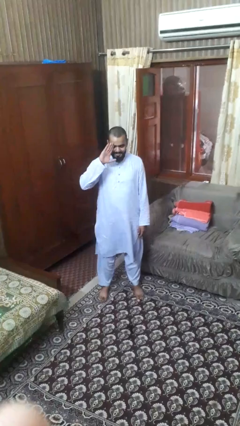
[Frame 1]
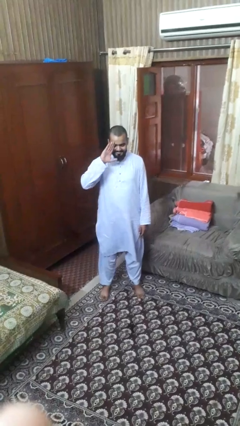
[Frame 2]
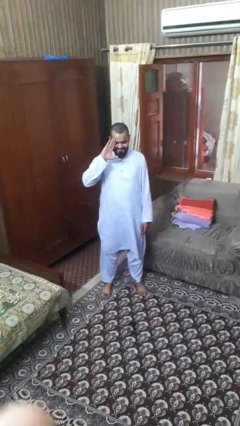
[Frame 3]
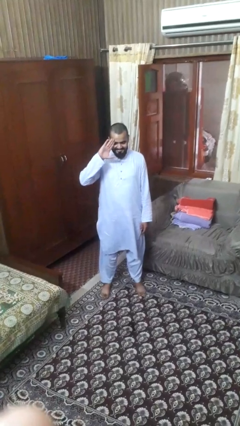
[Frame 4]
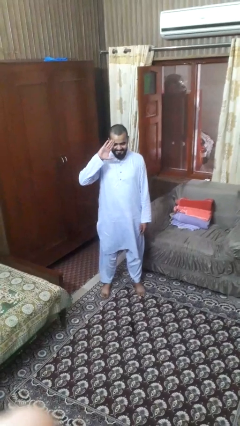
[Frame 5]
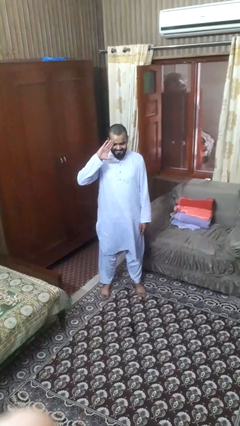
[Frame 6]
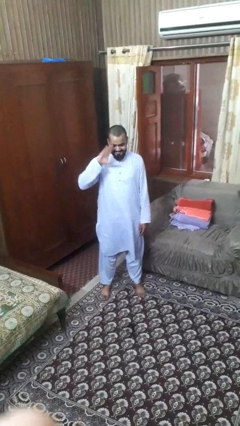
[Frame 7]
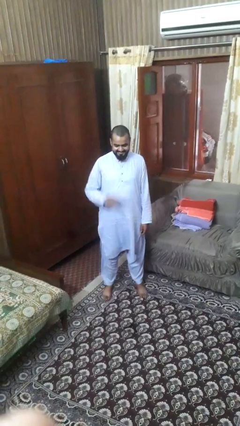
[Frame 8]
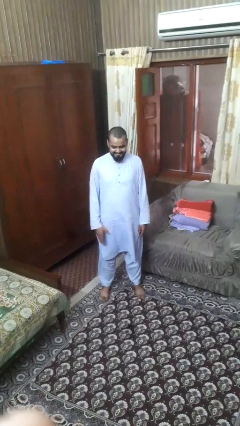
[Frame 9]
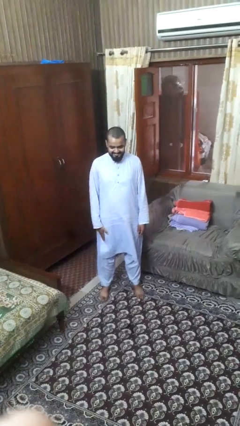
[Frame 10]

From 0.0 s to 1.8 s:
person salutes

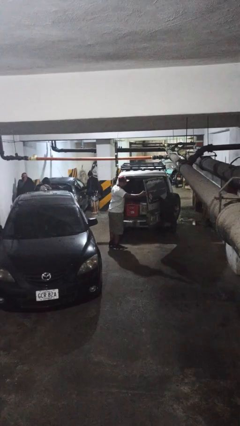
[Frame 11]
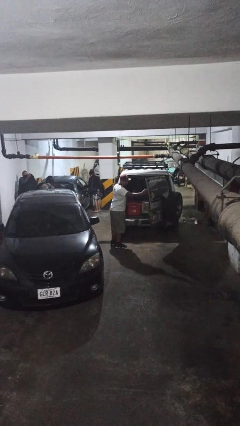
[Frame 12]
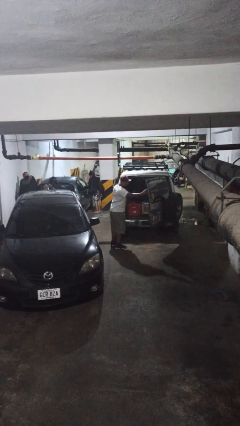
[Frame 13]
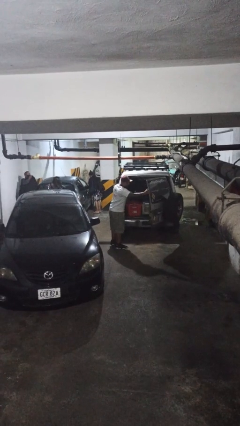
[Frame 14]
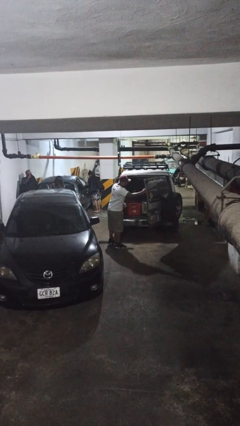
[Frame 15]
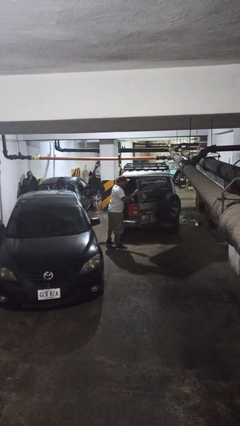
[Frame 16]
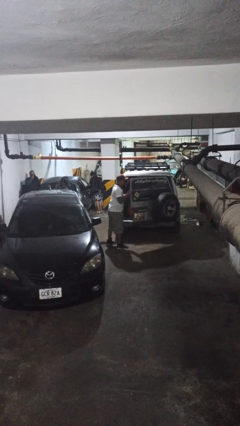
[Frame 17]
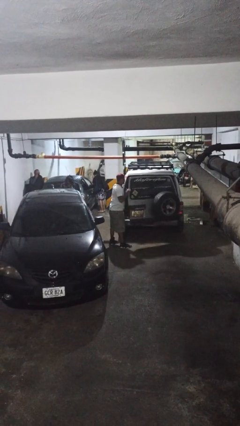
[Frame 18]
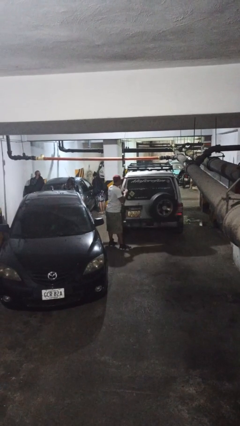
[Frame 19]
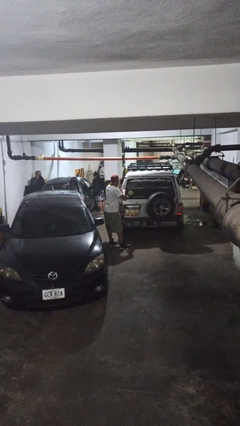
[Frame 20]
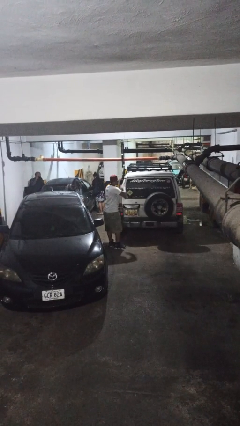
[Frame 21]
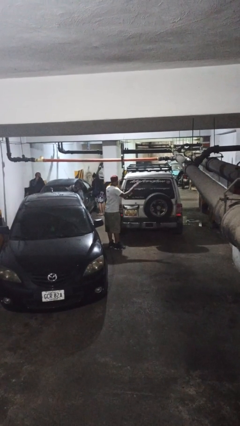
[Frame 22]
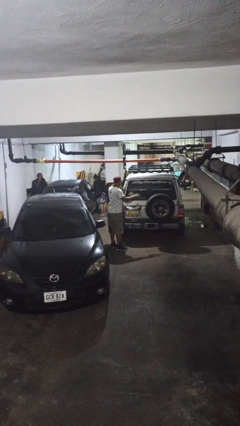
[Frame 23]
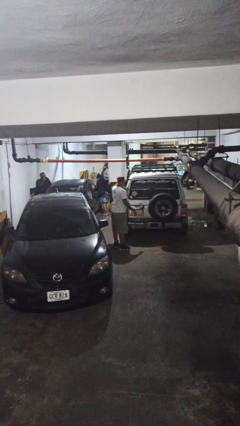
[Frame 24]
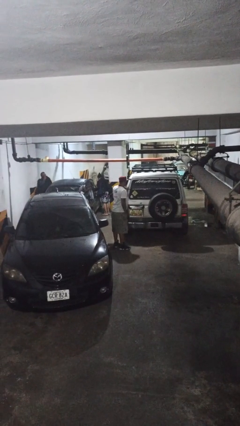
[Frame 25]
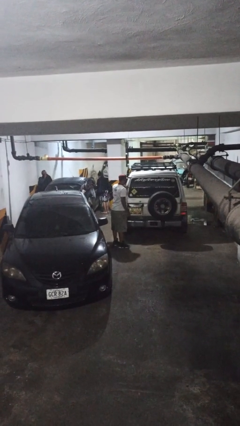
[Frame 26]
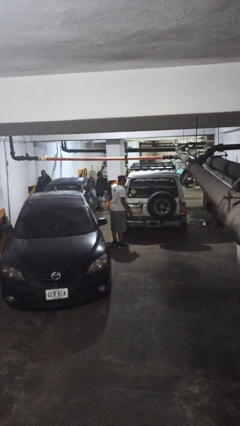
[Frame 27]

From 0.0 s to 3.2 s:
person closes car trunk

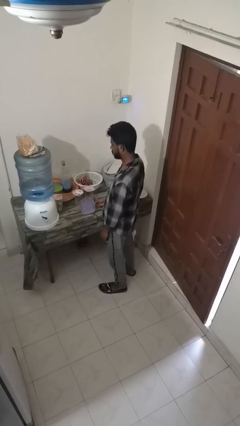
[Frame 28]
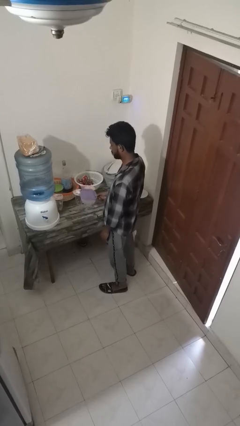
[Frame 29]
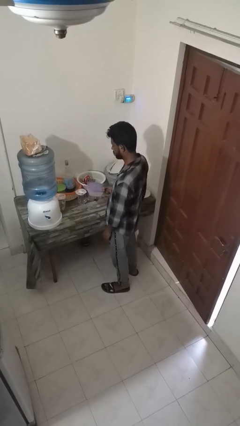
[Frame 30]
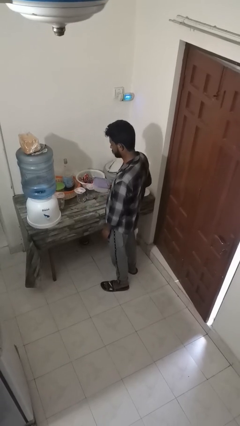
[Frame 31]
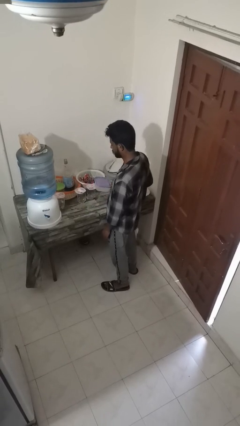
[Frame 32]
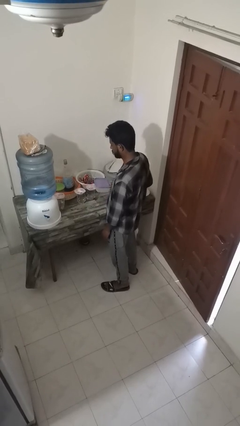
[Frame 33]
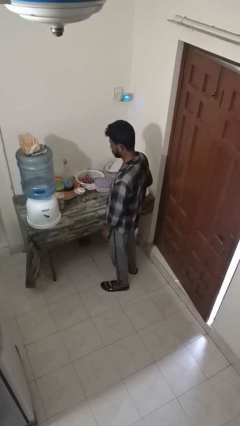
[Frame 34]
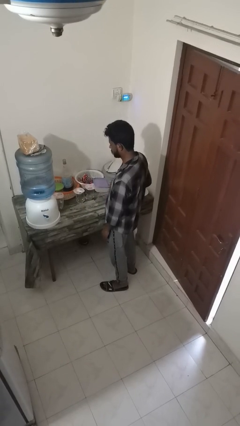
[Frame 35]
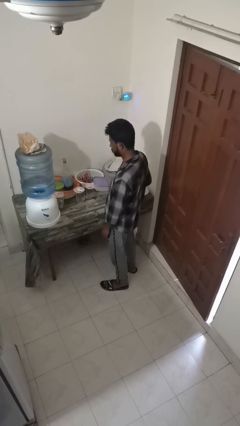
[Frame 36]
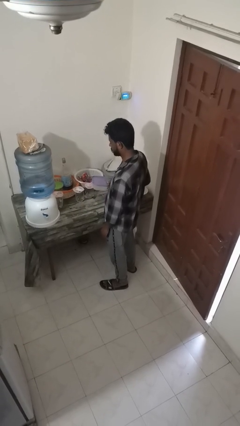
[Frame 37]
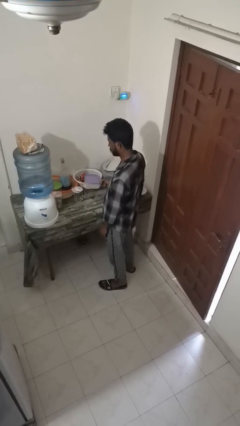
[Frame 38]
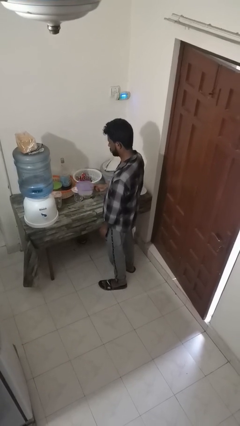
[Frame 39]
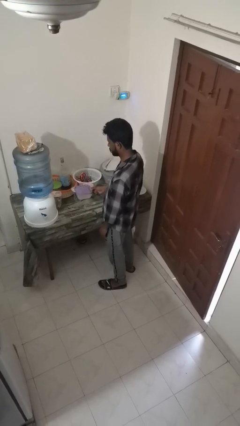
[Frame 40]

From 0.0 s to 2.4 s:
person picks up object from countertop

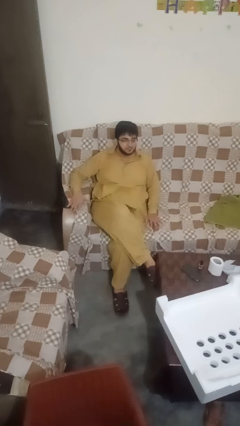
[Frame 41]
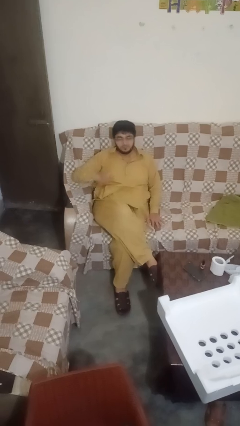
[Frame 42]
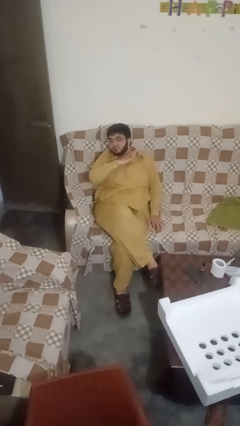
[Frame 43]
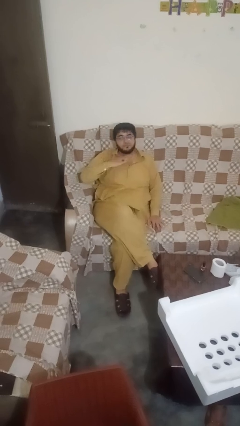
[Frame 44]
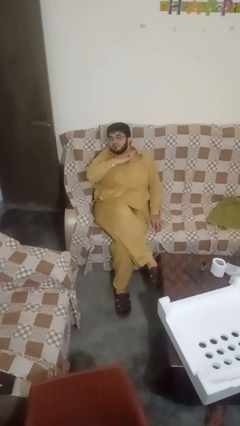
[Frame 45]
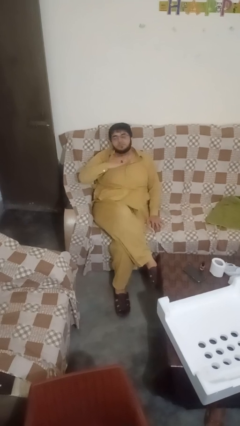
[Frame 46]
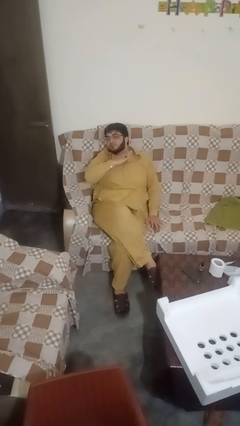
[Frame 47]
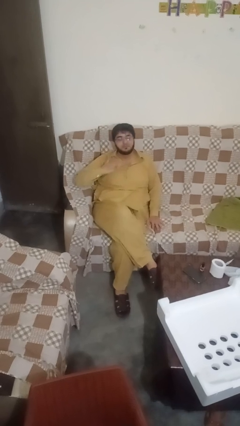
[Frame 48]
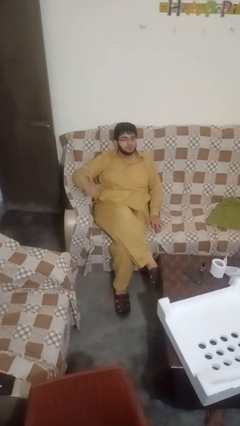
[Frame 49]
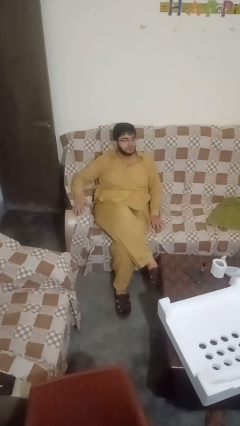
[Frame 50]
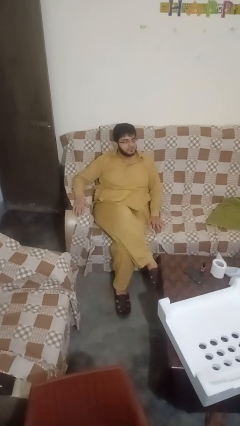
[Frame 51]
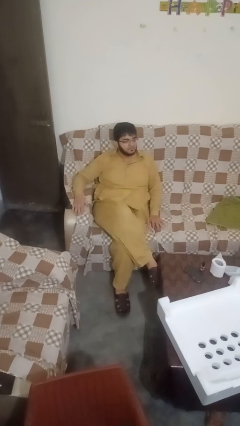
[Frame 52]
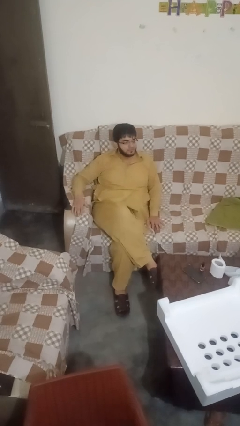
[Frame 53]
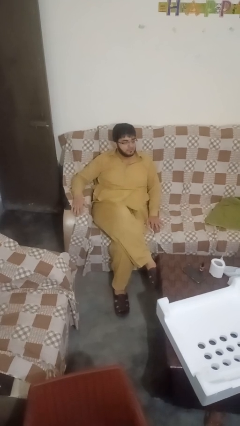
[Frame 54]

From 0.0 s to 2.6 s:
person gestures cut

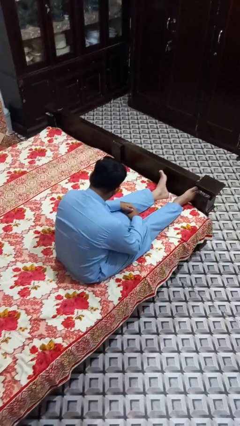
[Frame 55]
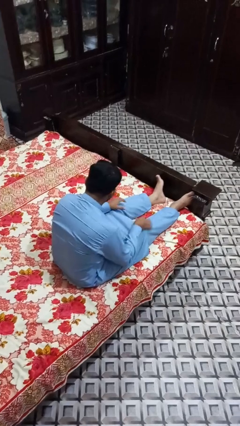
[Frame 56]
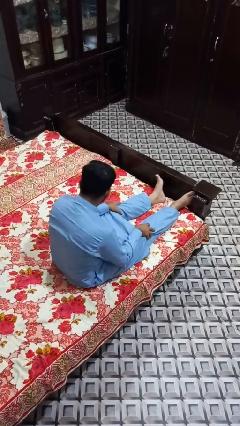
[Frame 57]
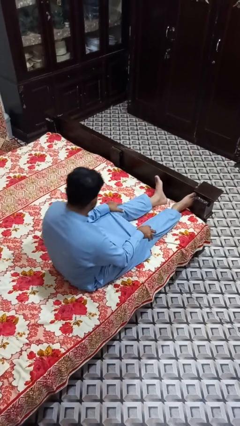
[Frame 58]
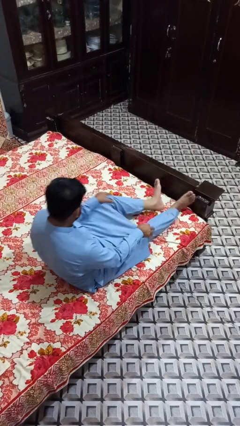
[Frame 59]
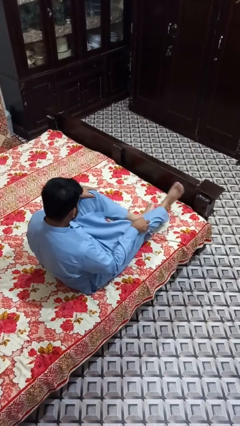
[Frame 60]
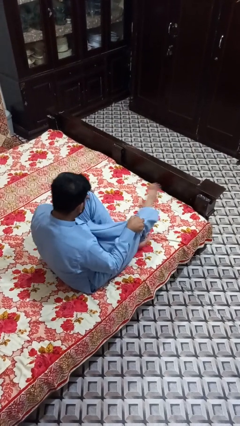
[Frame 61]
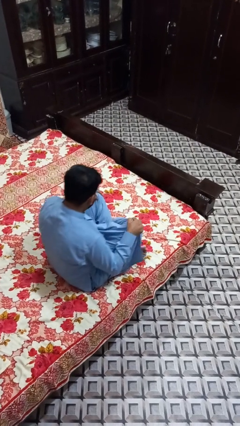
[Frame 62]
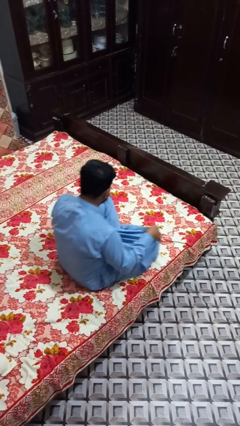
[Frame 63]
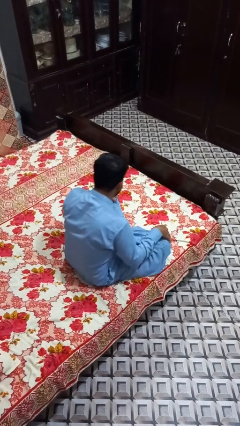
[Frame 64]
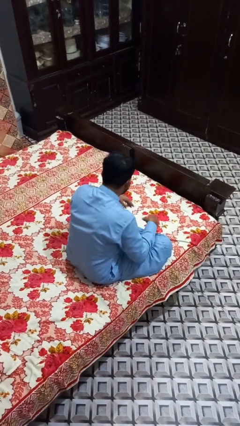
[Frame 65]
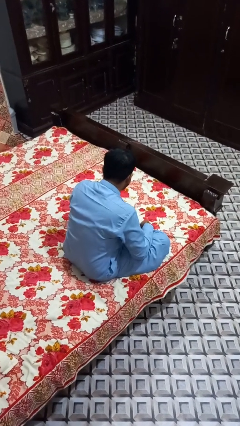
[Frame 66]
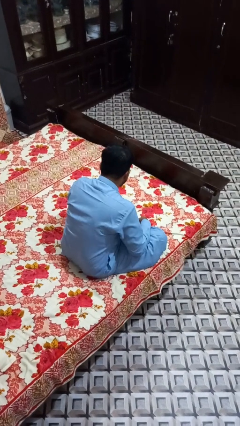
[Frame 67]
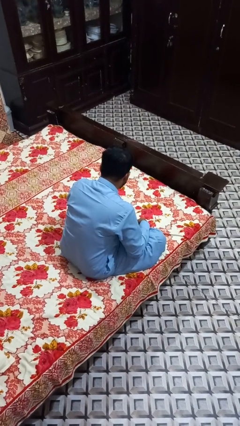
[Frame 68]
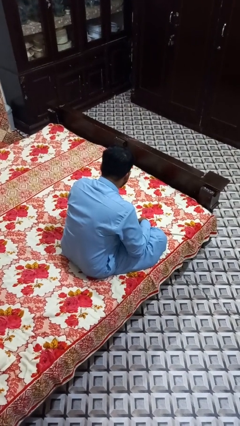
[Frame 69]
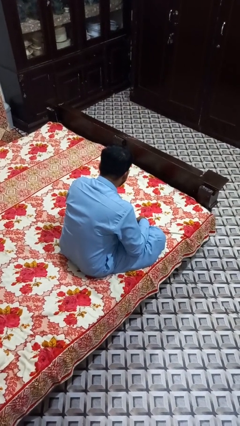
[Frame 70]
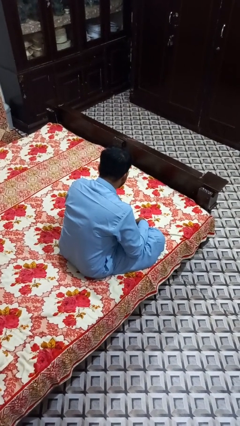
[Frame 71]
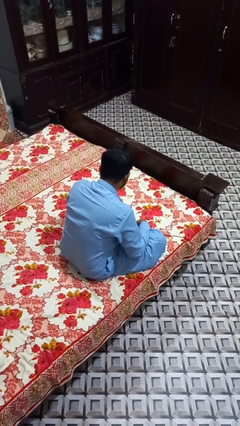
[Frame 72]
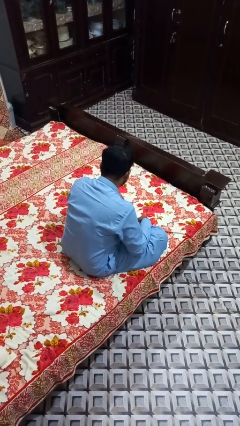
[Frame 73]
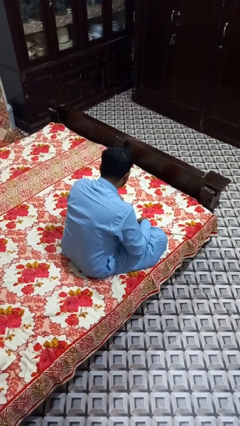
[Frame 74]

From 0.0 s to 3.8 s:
person crosses legs

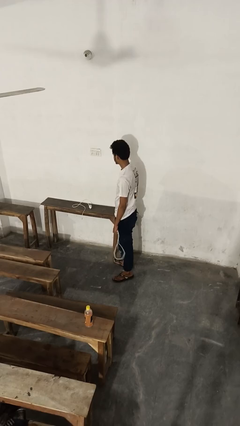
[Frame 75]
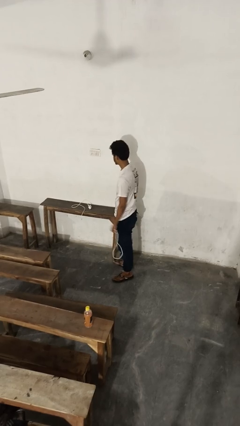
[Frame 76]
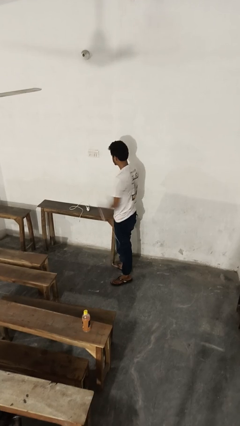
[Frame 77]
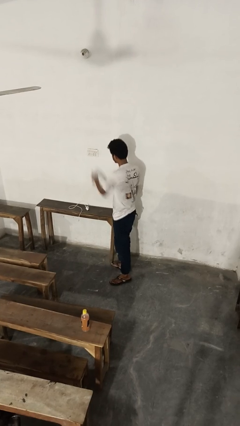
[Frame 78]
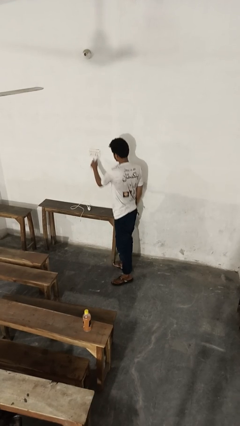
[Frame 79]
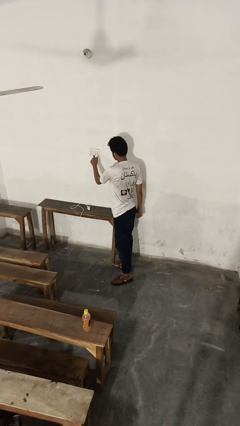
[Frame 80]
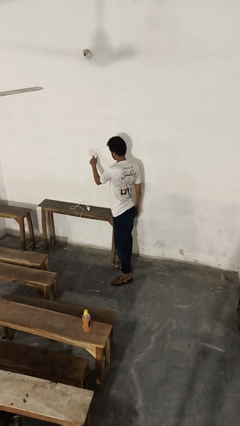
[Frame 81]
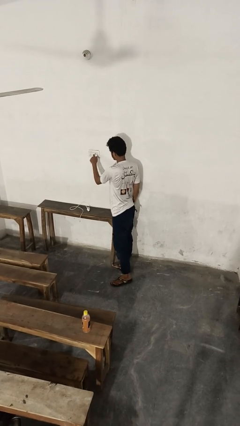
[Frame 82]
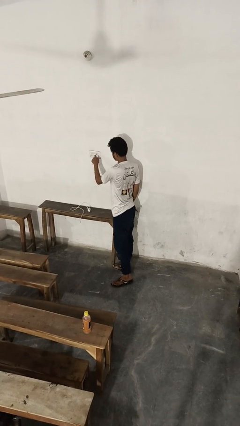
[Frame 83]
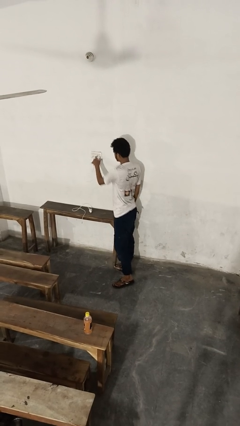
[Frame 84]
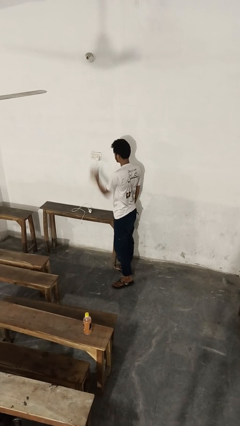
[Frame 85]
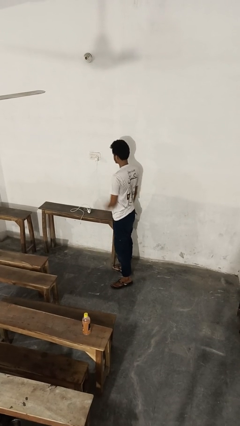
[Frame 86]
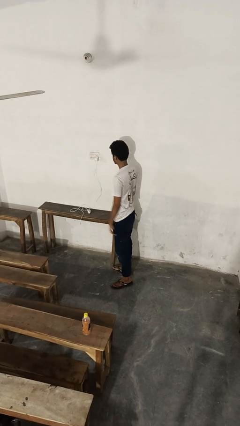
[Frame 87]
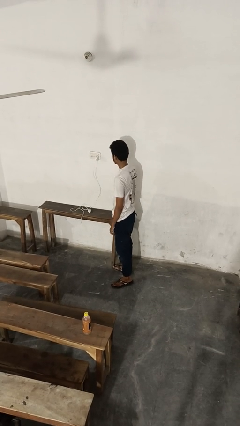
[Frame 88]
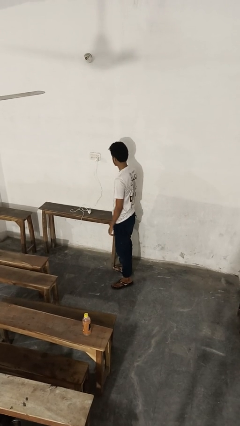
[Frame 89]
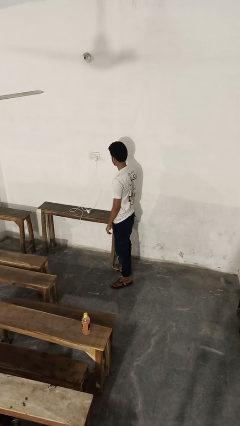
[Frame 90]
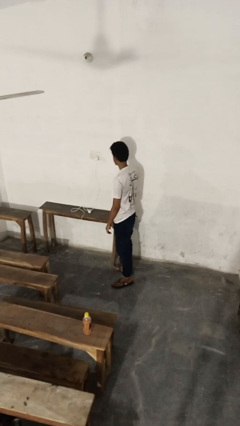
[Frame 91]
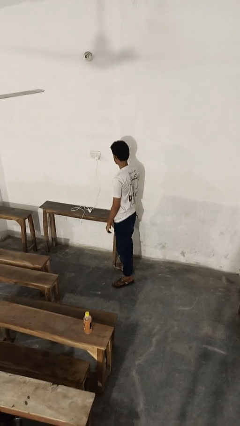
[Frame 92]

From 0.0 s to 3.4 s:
person plugs into electrical socket

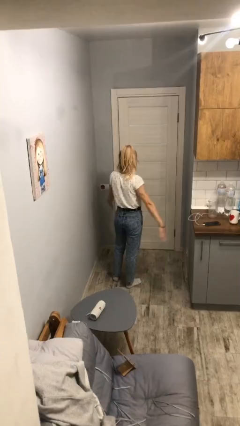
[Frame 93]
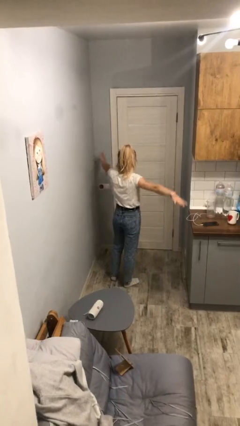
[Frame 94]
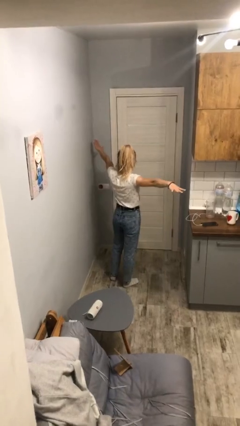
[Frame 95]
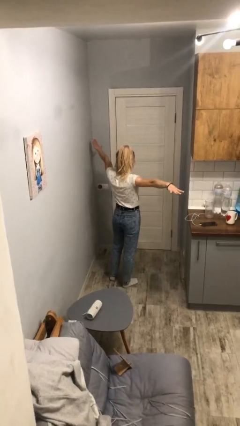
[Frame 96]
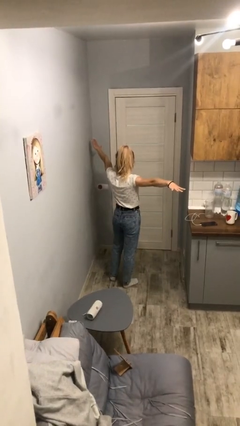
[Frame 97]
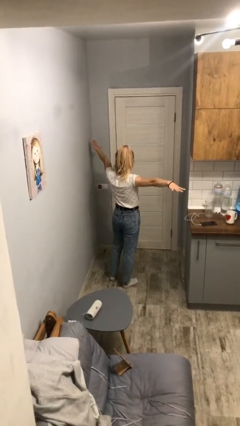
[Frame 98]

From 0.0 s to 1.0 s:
person stretches arms to side